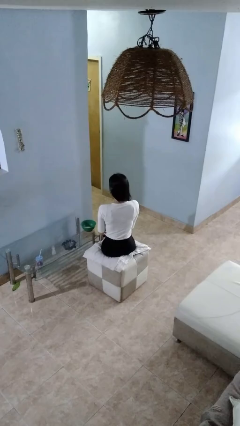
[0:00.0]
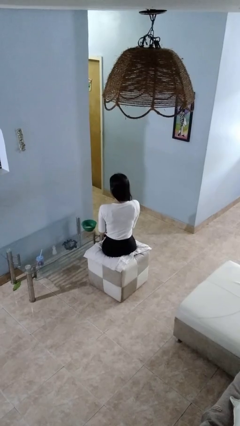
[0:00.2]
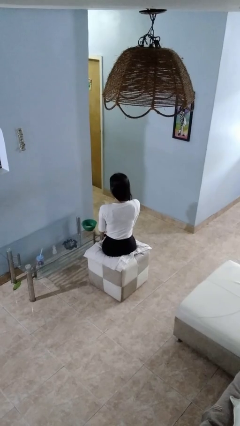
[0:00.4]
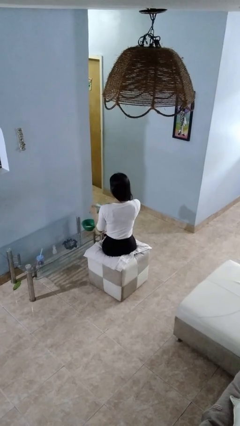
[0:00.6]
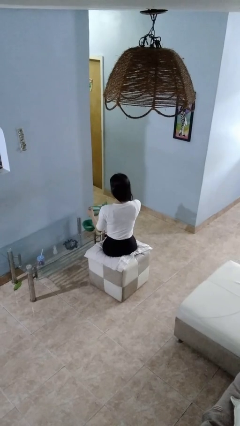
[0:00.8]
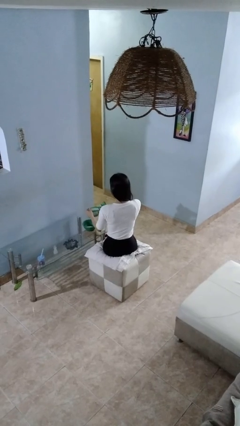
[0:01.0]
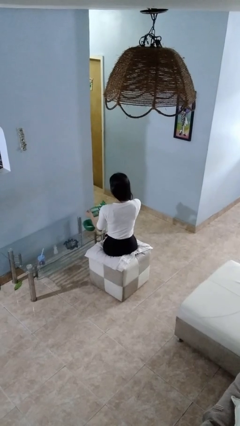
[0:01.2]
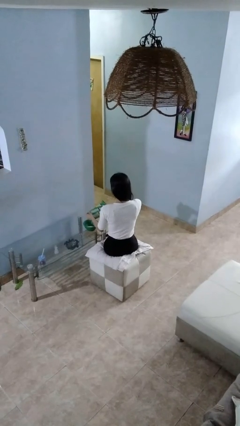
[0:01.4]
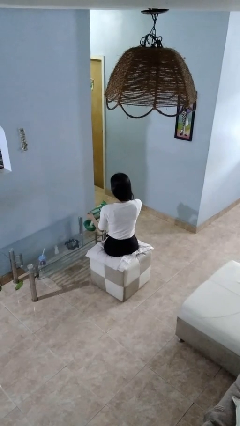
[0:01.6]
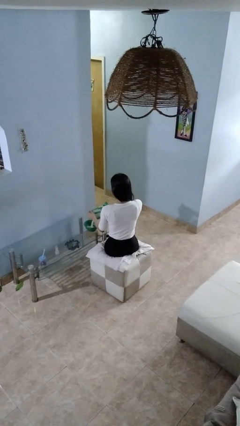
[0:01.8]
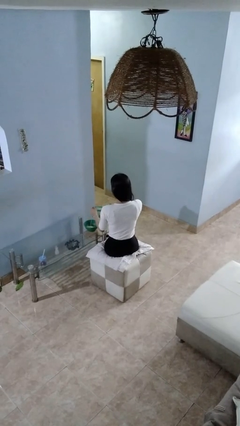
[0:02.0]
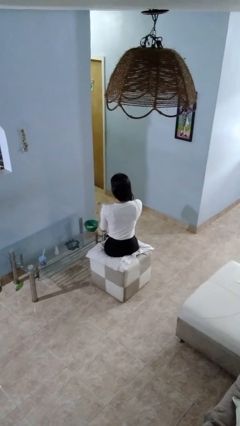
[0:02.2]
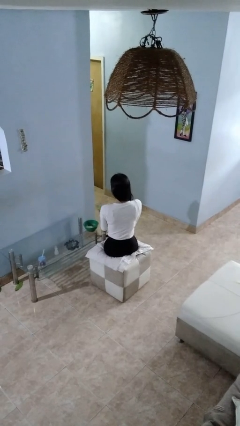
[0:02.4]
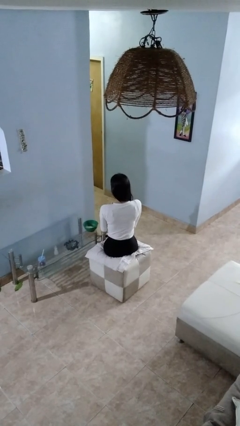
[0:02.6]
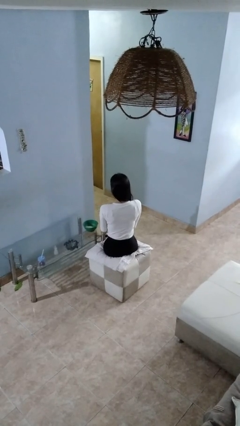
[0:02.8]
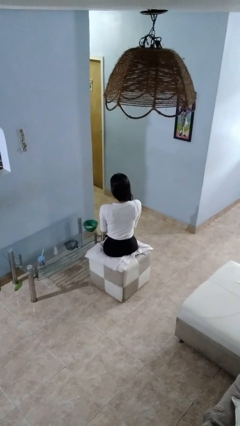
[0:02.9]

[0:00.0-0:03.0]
person pours into bowl

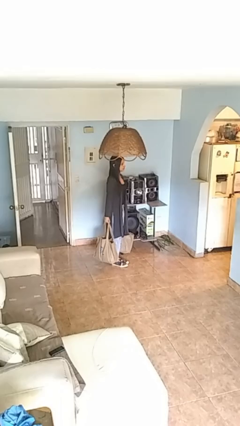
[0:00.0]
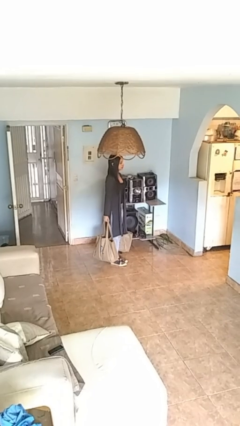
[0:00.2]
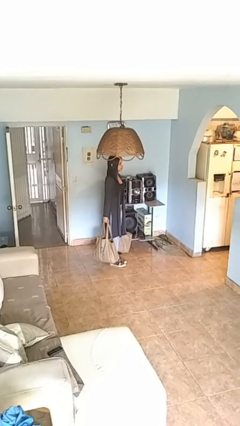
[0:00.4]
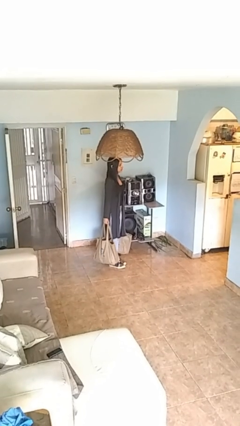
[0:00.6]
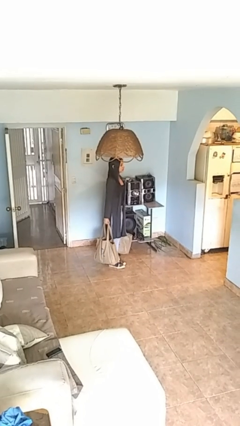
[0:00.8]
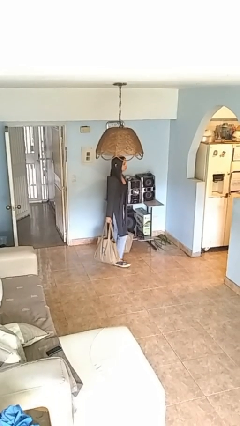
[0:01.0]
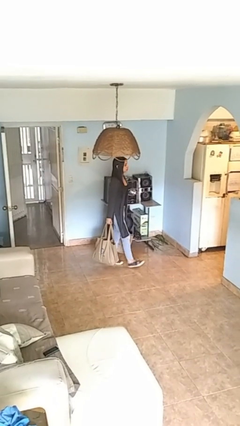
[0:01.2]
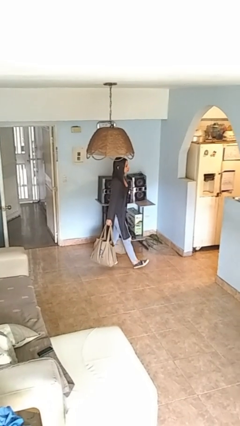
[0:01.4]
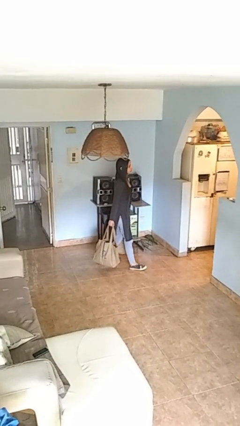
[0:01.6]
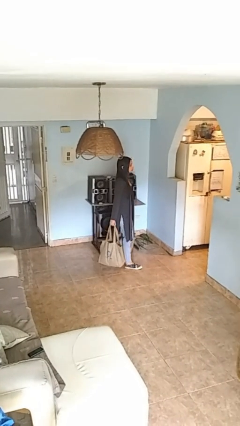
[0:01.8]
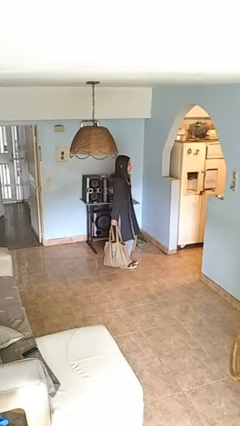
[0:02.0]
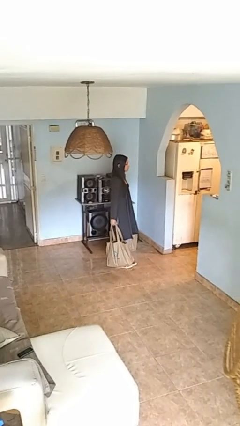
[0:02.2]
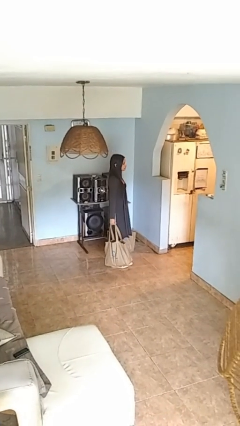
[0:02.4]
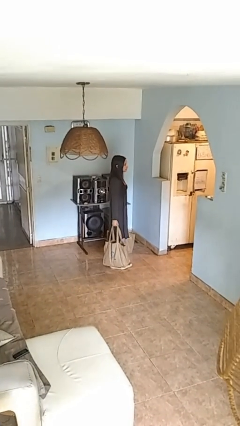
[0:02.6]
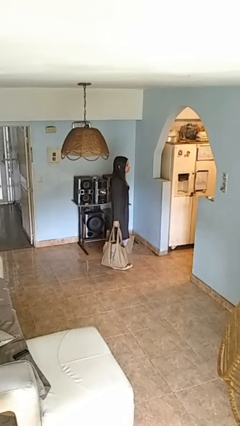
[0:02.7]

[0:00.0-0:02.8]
person carries groceries

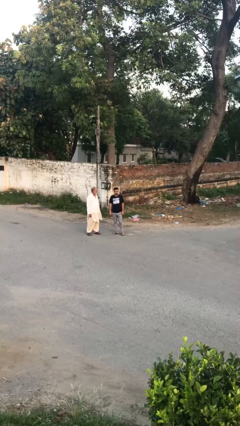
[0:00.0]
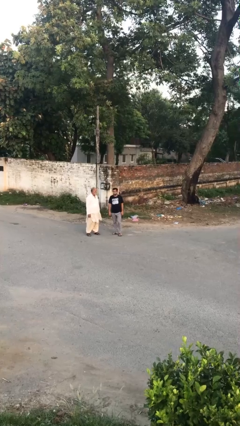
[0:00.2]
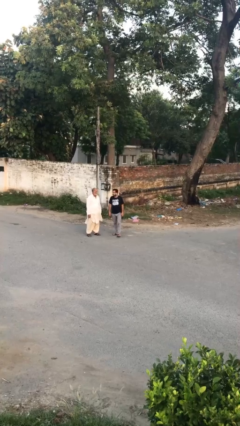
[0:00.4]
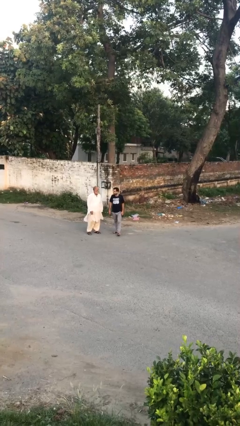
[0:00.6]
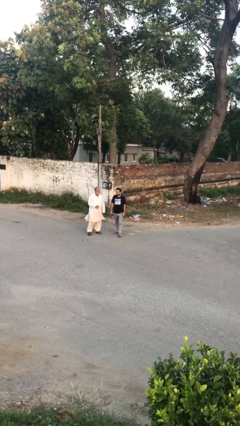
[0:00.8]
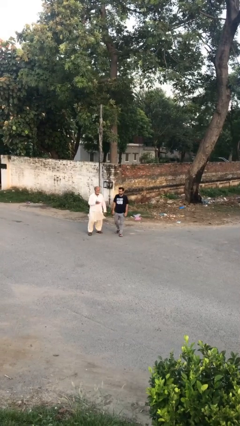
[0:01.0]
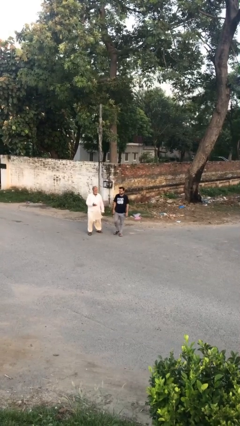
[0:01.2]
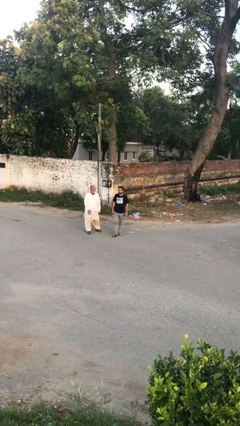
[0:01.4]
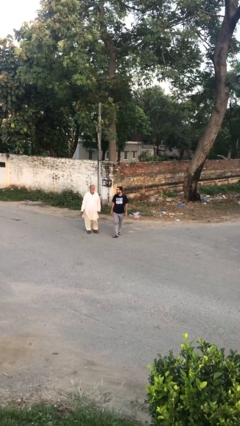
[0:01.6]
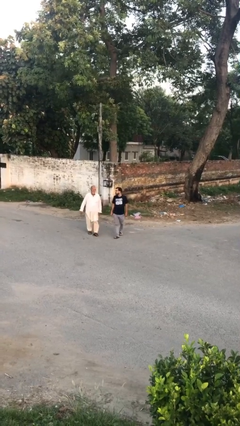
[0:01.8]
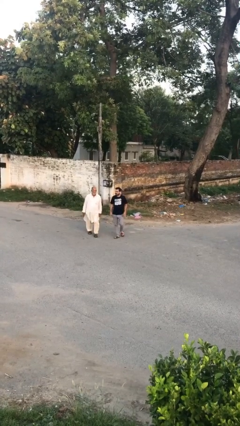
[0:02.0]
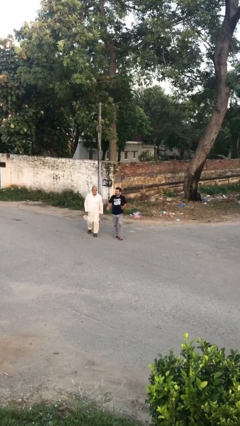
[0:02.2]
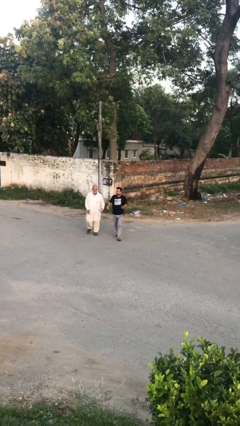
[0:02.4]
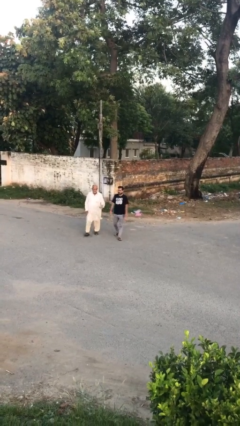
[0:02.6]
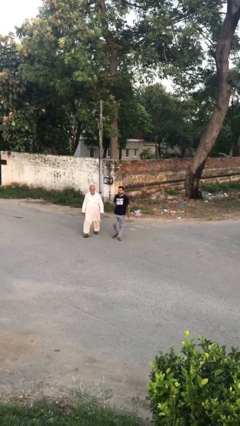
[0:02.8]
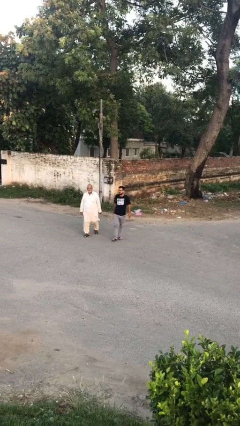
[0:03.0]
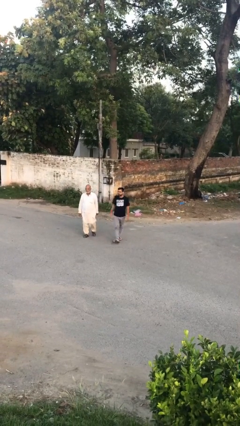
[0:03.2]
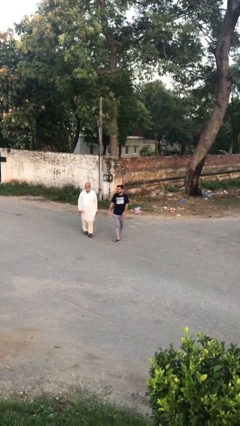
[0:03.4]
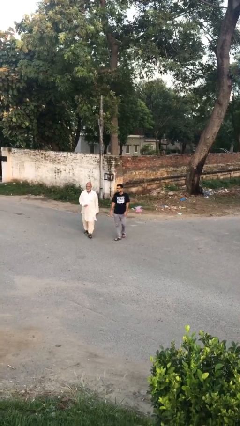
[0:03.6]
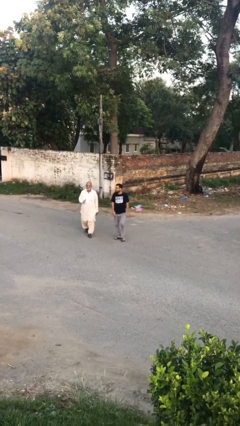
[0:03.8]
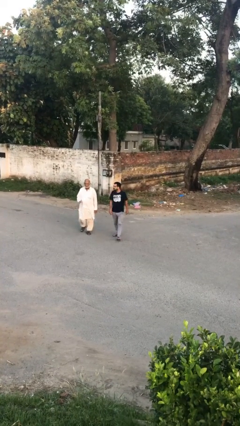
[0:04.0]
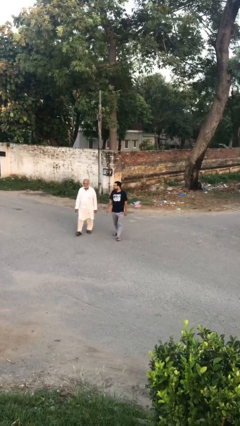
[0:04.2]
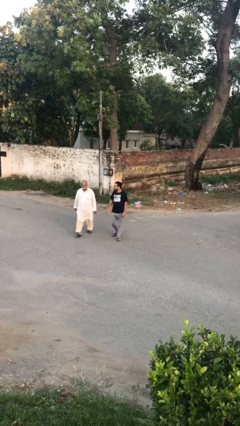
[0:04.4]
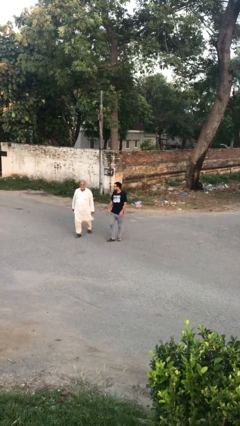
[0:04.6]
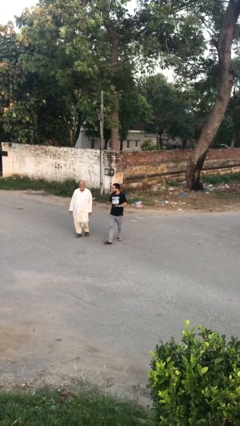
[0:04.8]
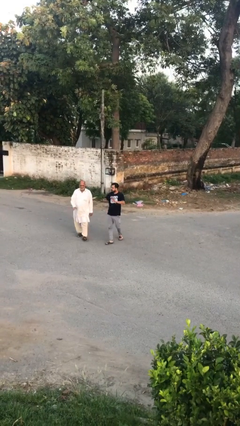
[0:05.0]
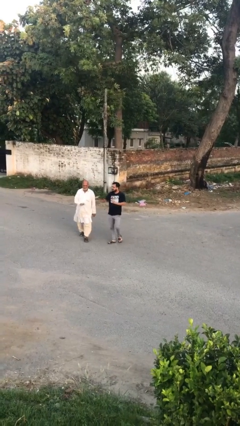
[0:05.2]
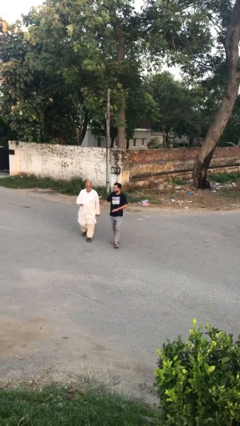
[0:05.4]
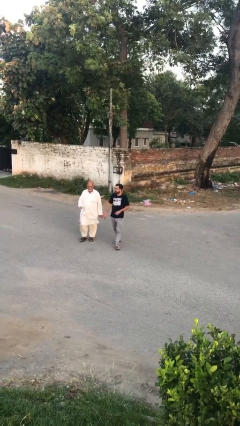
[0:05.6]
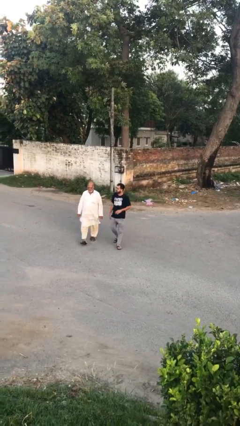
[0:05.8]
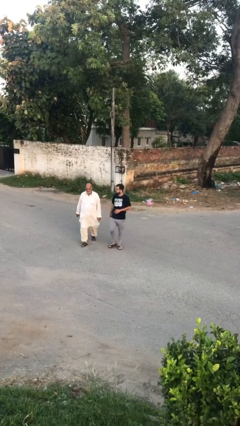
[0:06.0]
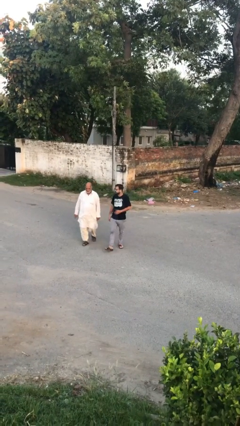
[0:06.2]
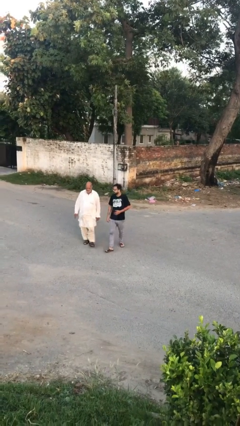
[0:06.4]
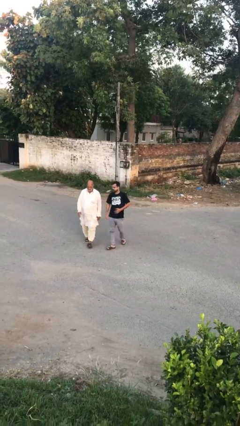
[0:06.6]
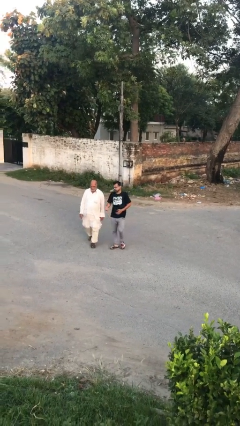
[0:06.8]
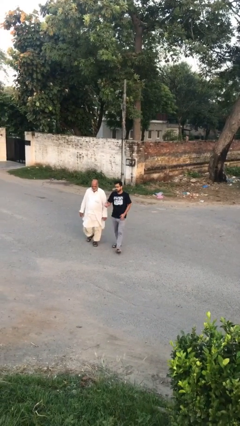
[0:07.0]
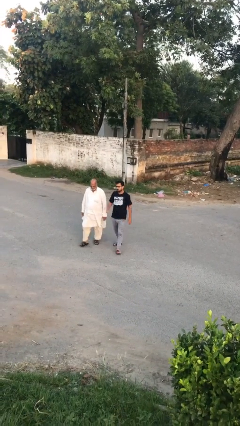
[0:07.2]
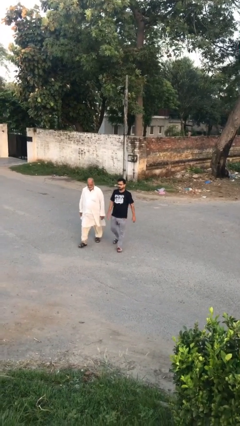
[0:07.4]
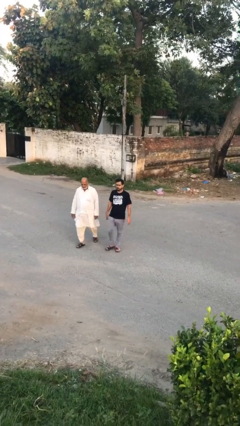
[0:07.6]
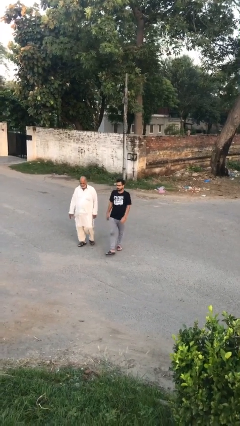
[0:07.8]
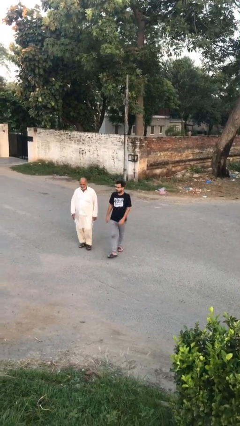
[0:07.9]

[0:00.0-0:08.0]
person talks to person

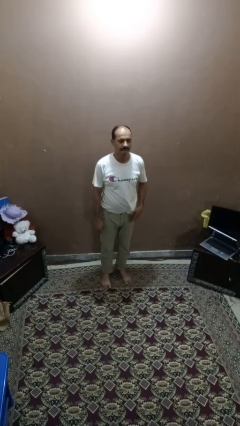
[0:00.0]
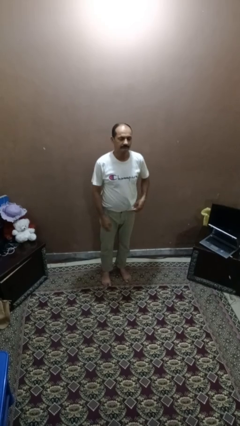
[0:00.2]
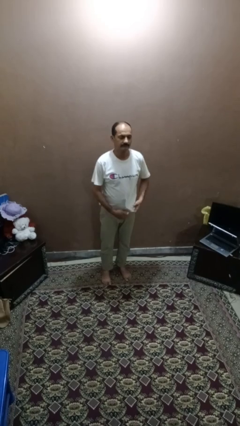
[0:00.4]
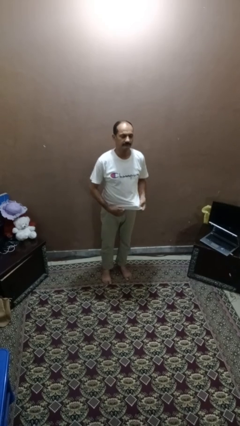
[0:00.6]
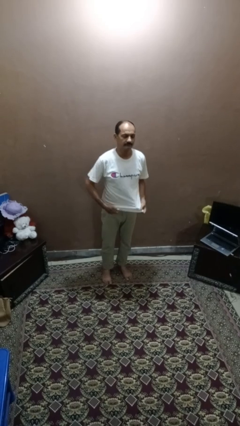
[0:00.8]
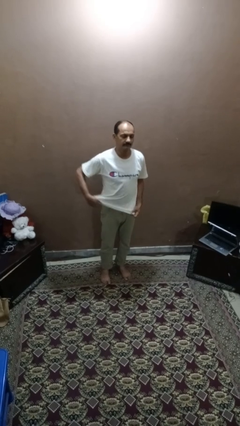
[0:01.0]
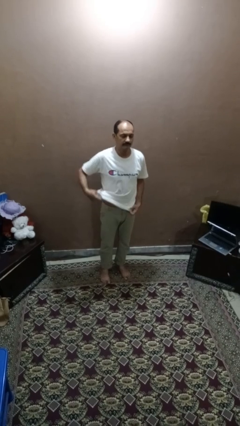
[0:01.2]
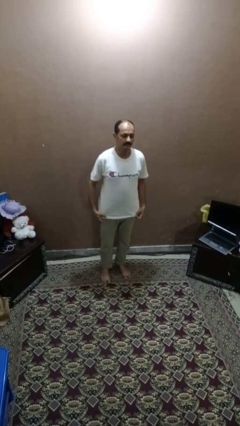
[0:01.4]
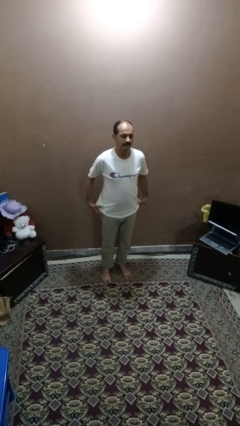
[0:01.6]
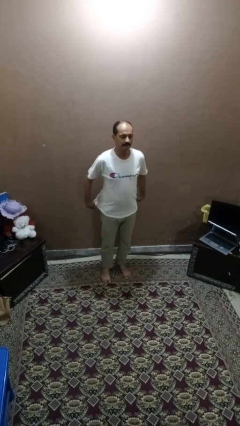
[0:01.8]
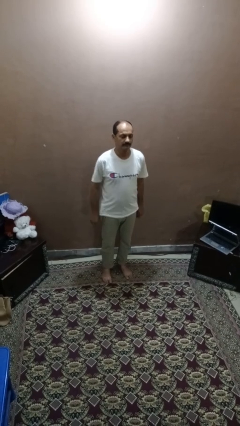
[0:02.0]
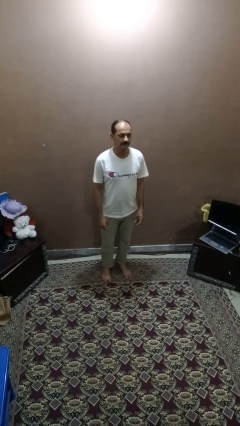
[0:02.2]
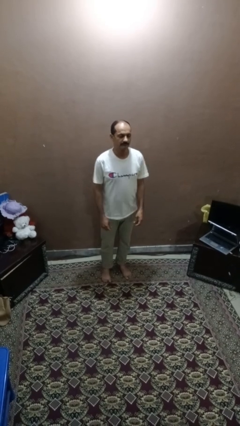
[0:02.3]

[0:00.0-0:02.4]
person untucks shirt

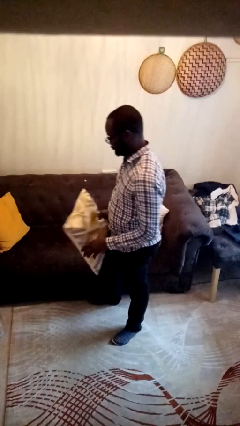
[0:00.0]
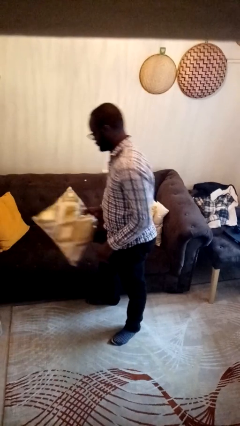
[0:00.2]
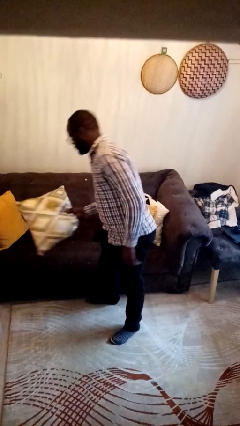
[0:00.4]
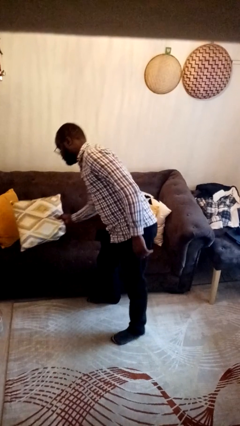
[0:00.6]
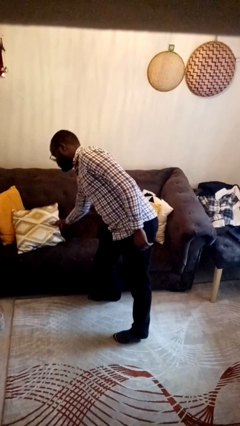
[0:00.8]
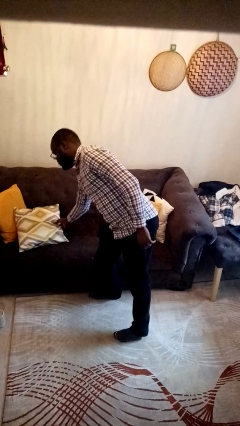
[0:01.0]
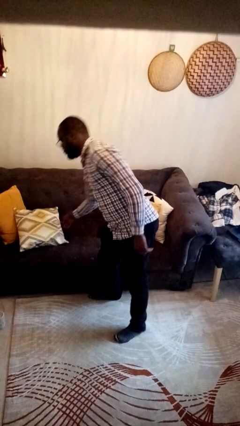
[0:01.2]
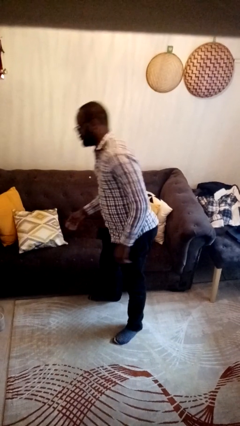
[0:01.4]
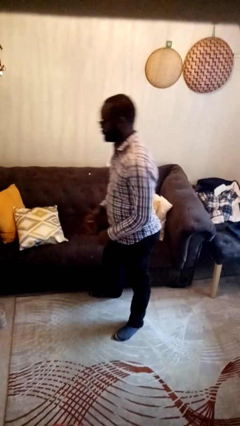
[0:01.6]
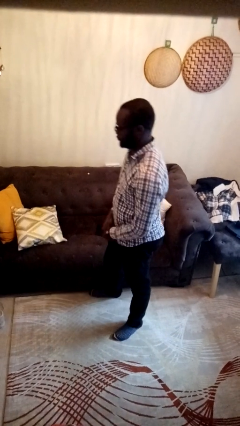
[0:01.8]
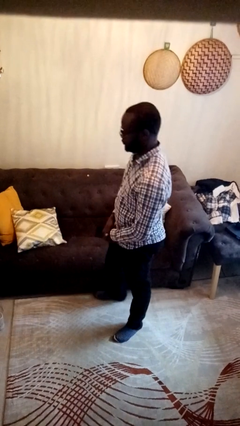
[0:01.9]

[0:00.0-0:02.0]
person puts down object on couch
